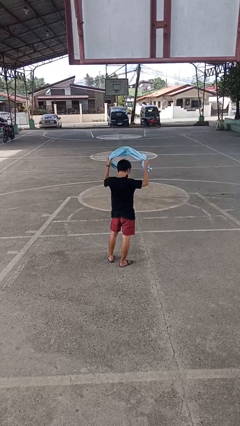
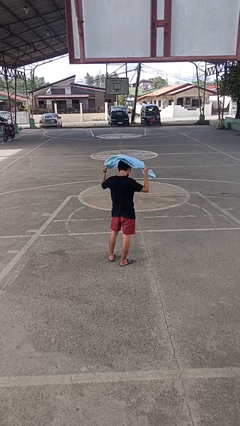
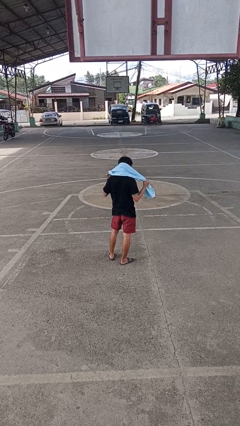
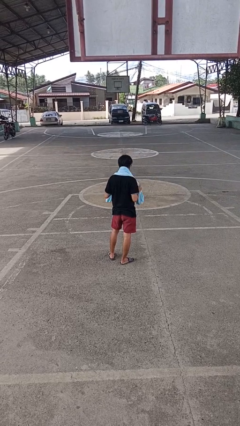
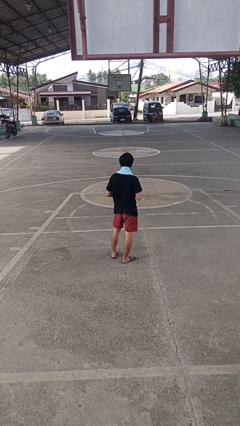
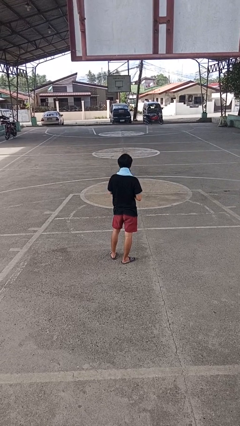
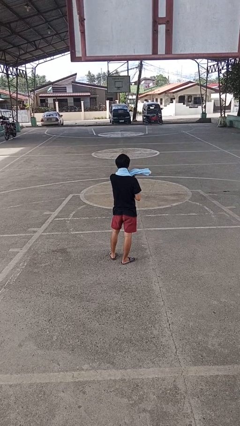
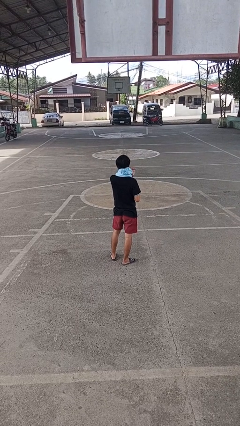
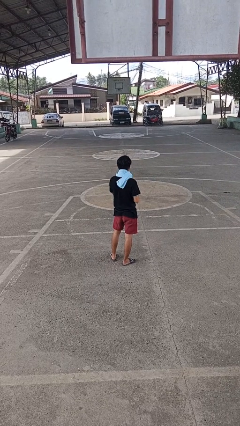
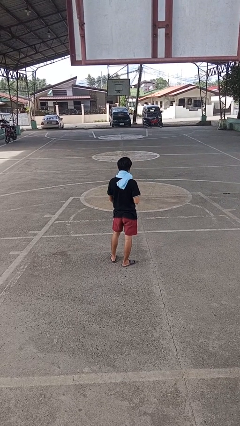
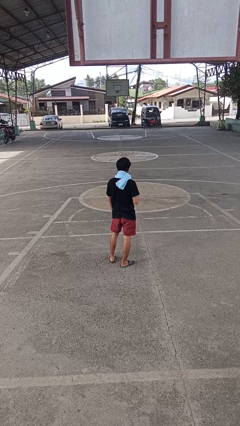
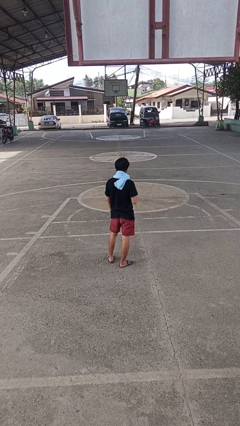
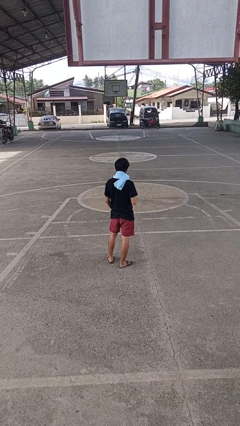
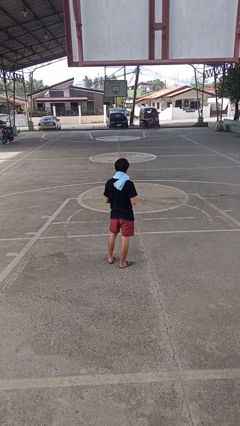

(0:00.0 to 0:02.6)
person puts on scarf

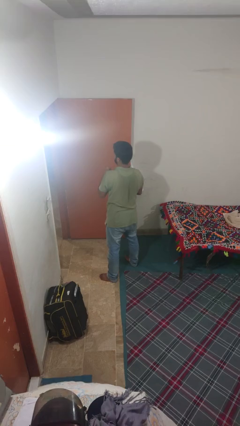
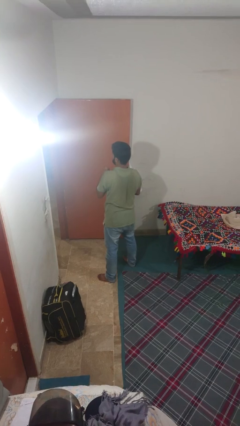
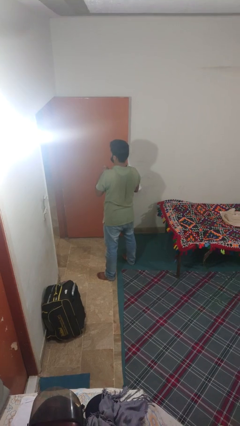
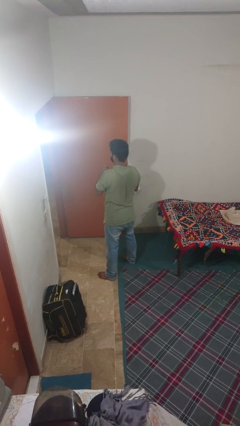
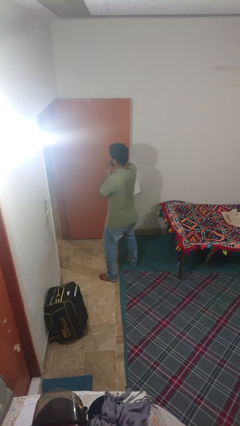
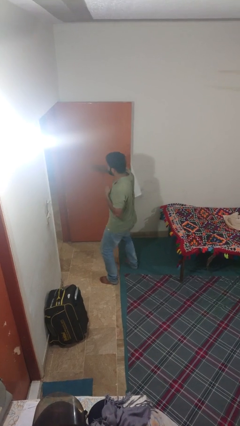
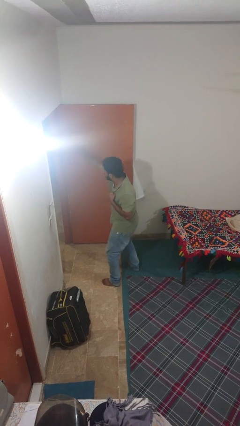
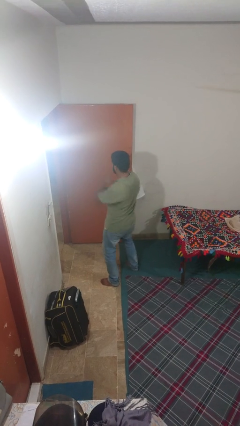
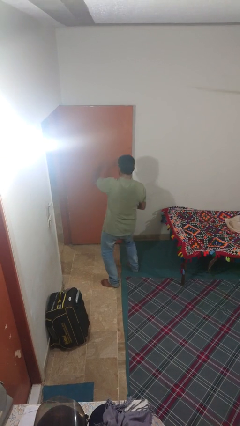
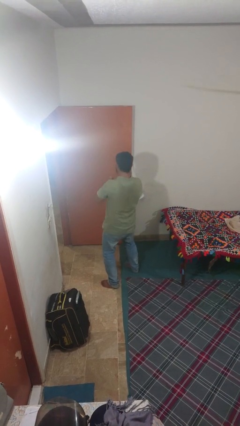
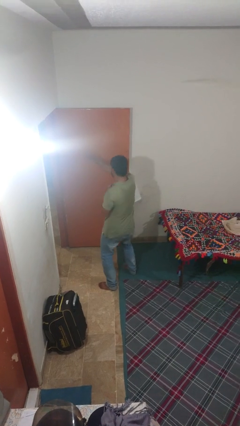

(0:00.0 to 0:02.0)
person punches

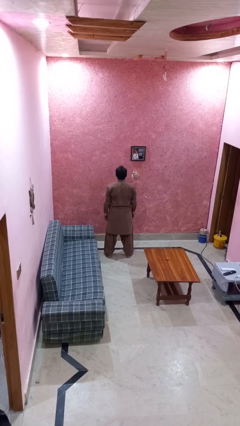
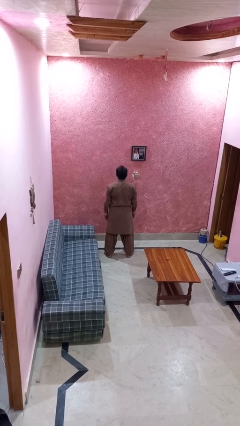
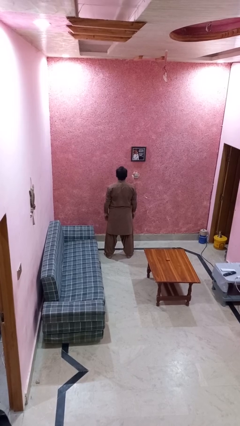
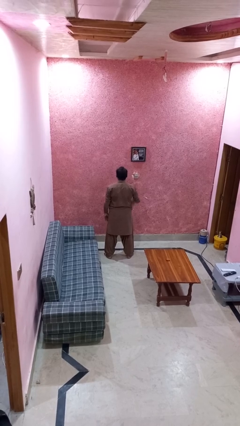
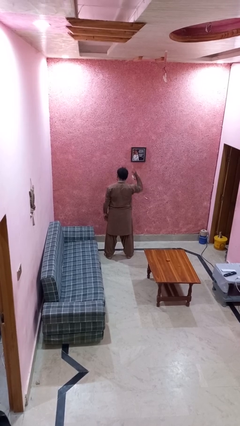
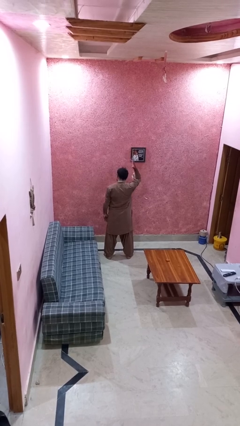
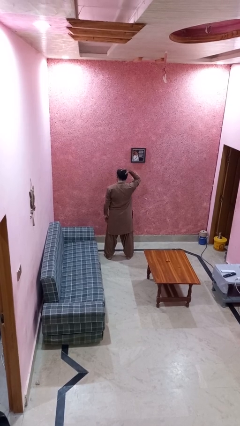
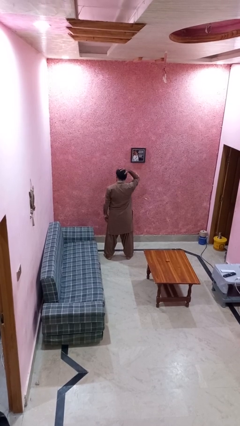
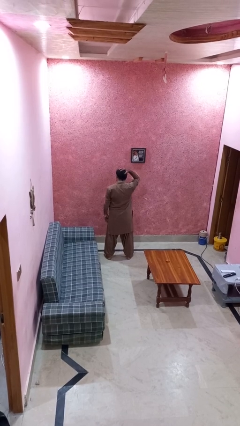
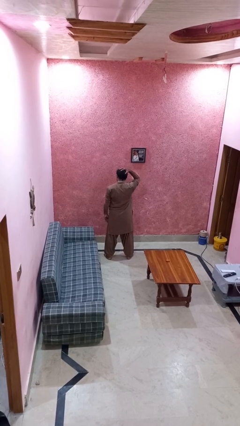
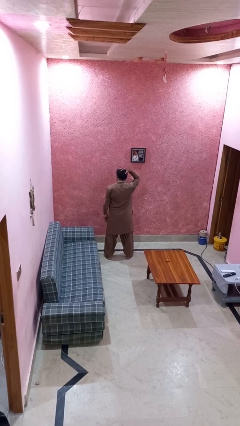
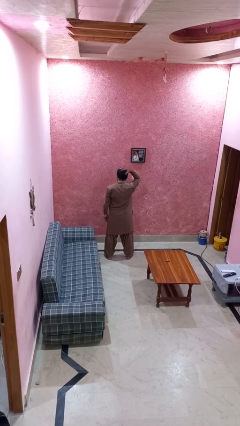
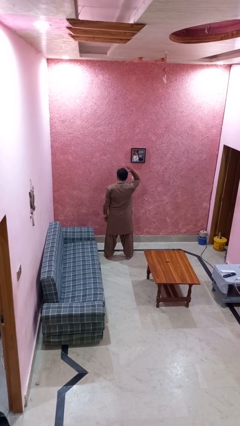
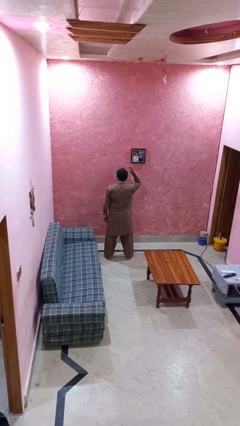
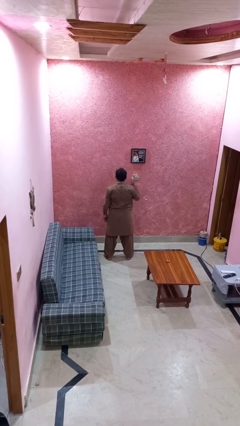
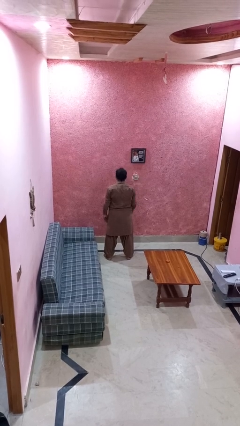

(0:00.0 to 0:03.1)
person pats head

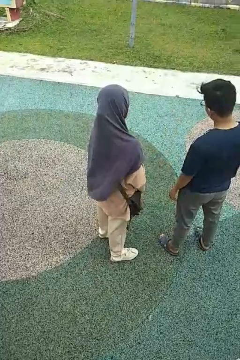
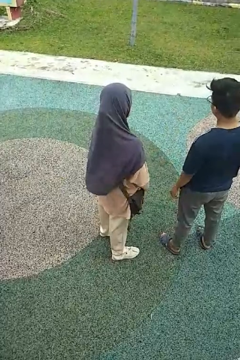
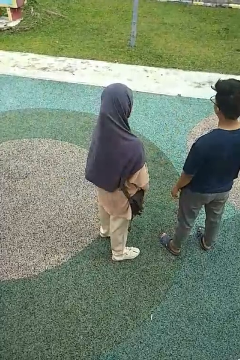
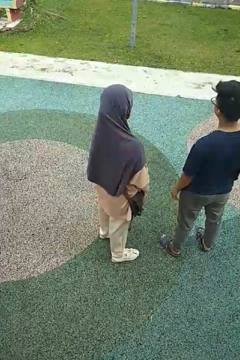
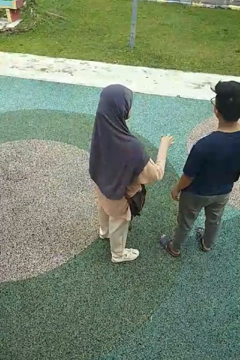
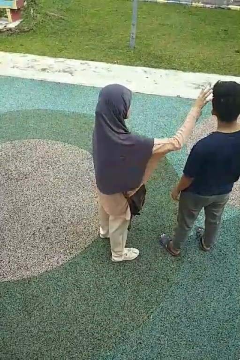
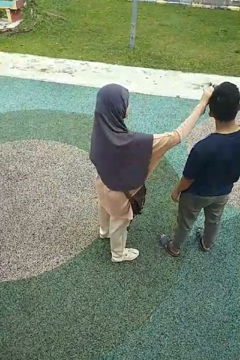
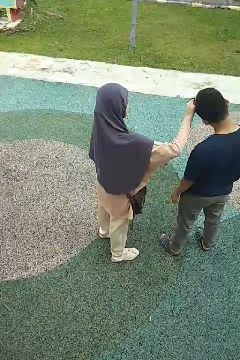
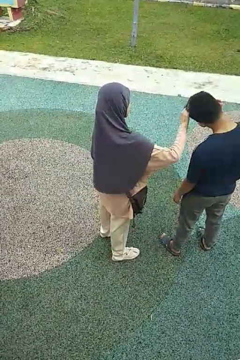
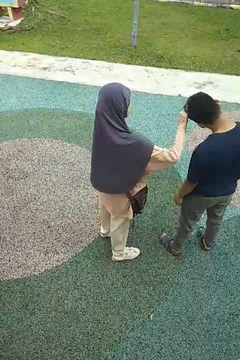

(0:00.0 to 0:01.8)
person grabs person by hair

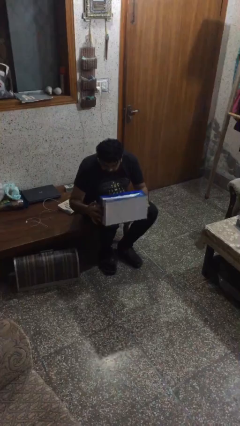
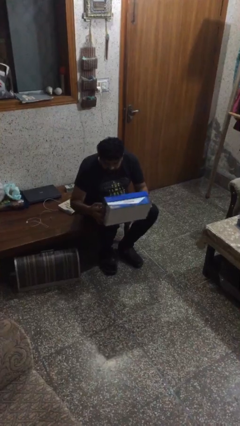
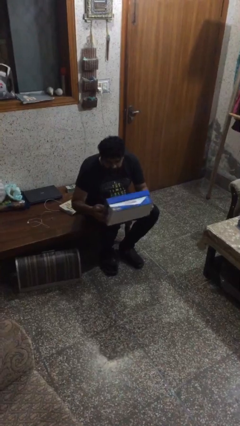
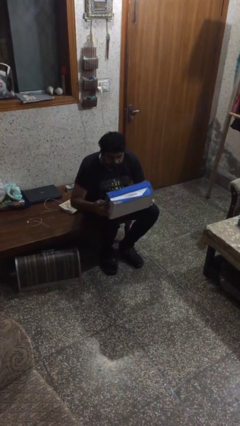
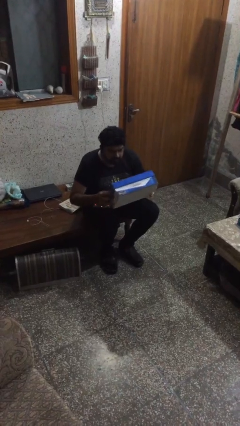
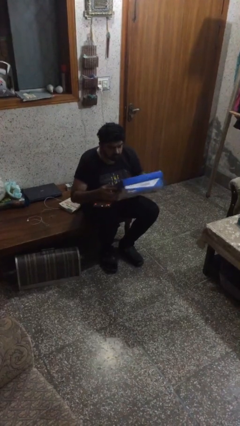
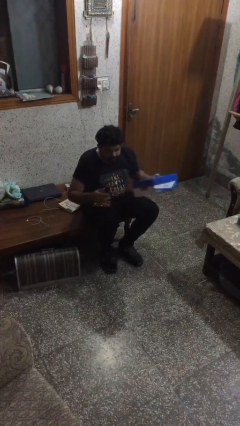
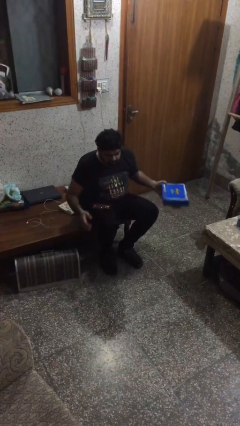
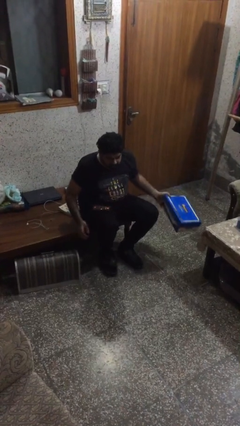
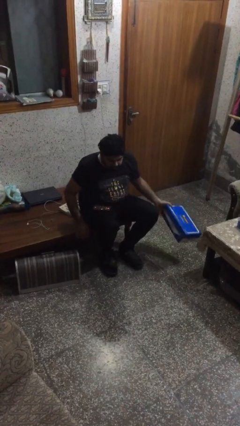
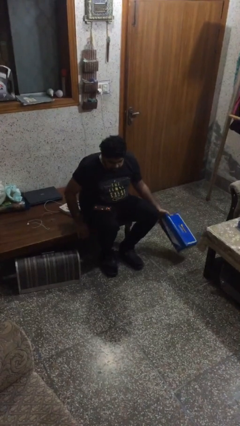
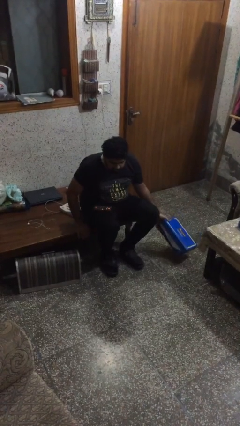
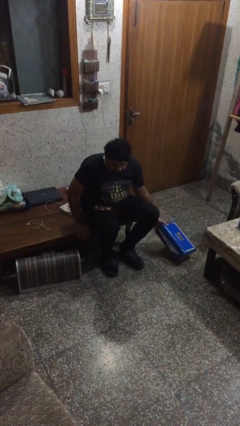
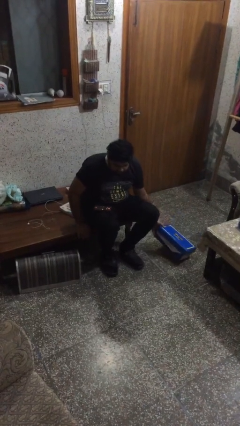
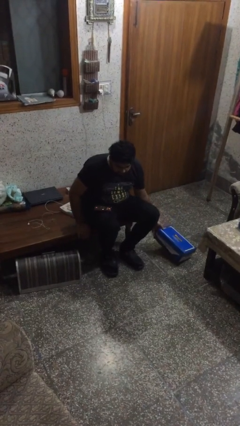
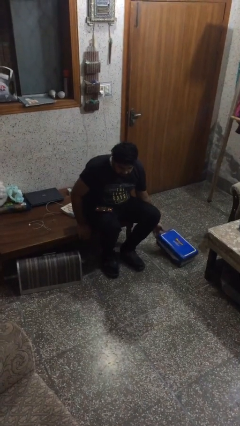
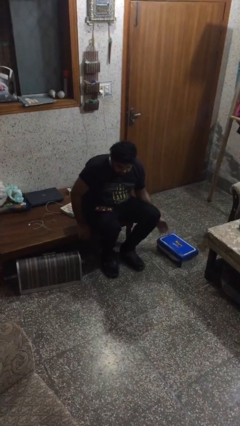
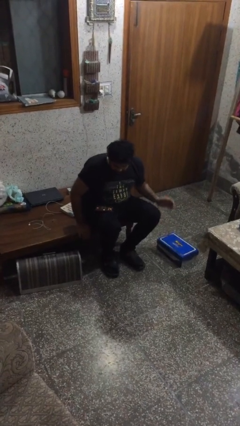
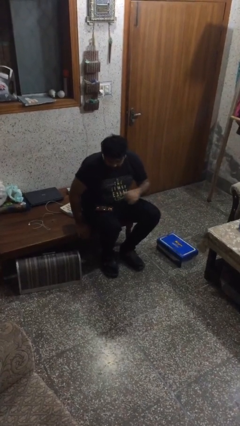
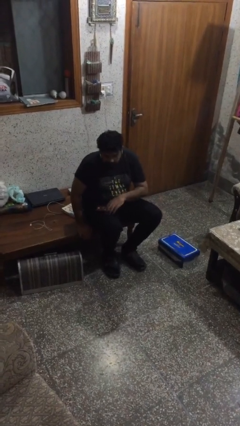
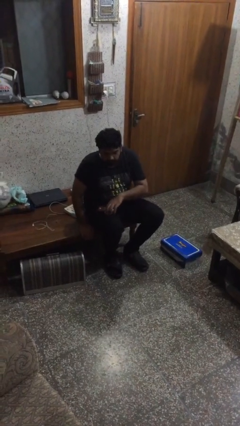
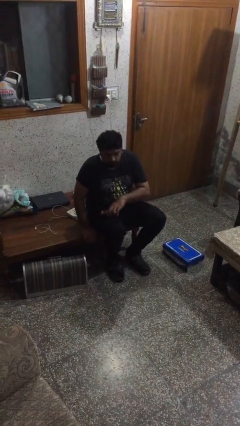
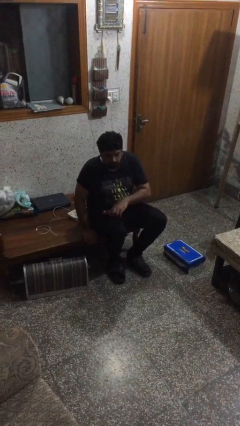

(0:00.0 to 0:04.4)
person puts down object on floor

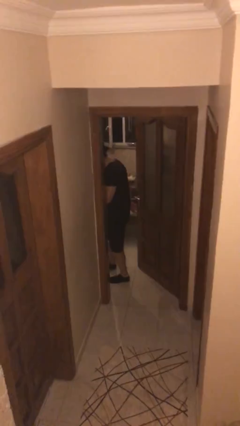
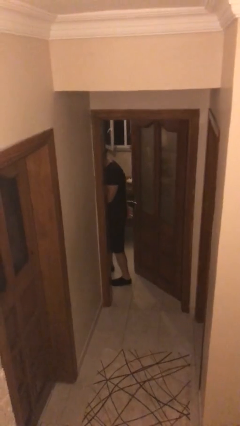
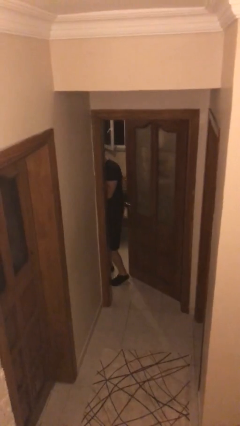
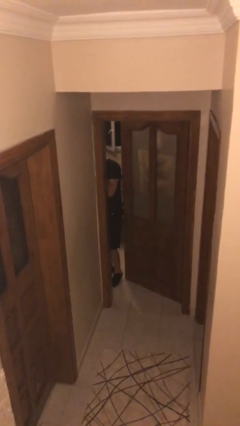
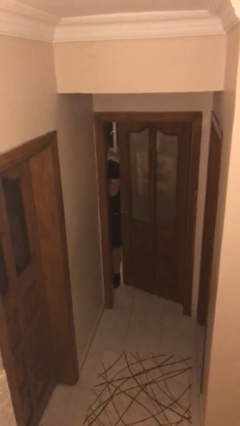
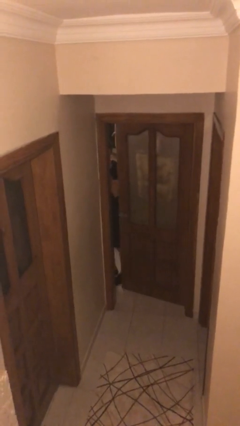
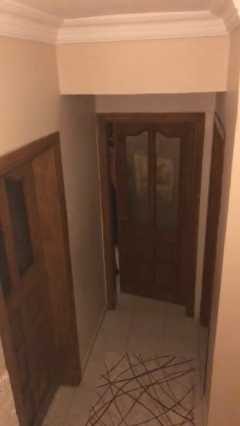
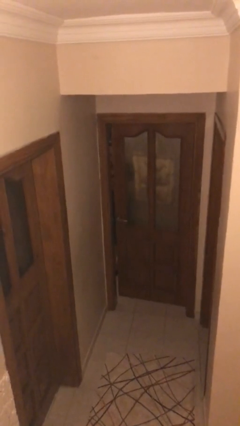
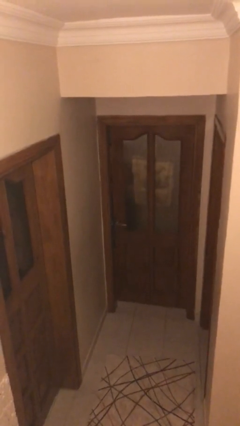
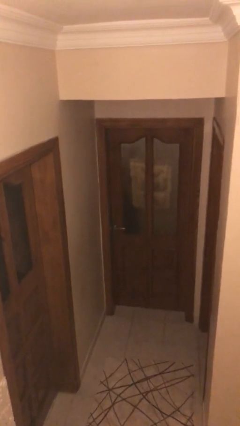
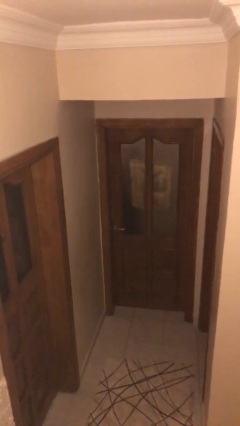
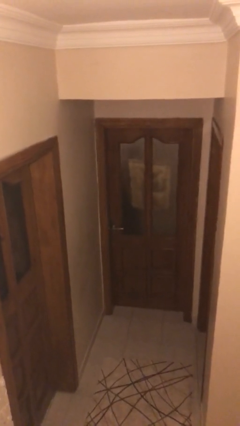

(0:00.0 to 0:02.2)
person closes facility door

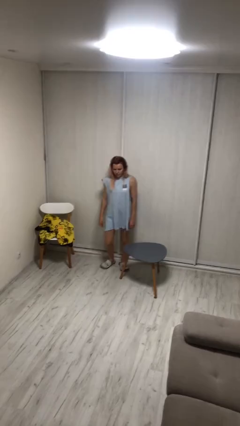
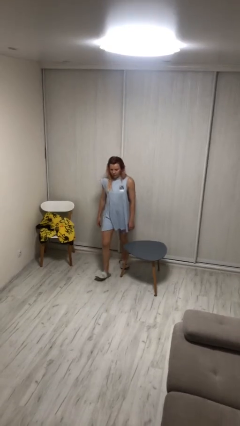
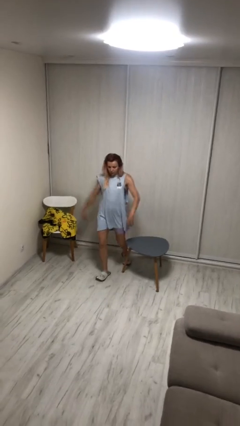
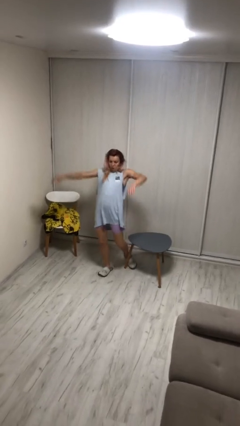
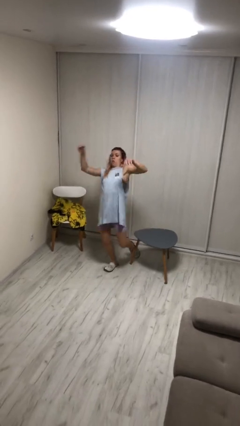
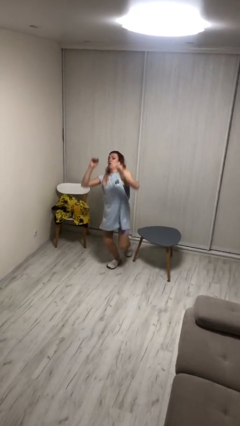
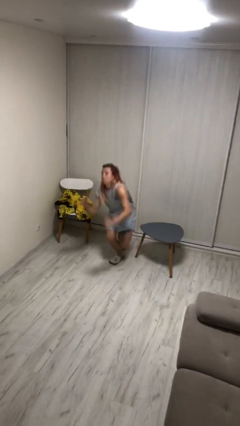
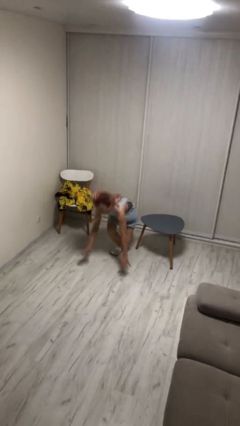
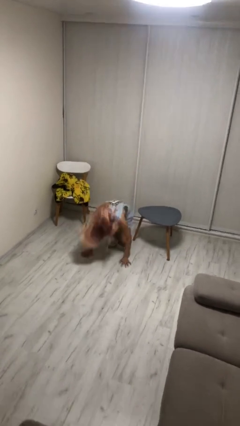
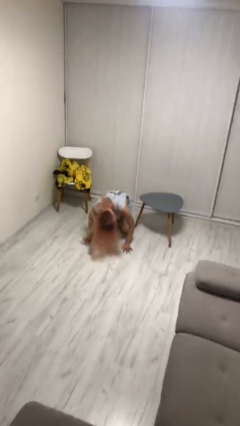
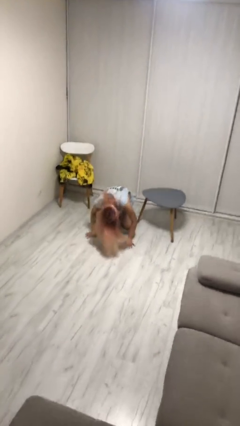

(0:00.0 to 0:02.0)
person trips on object on floor
